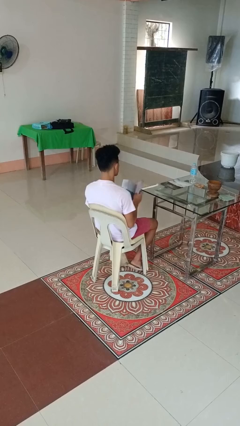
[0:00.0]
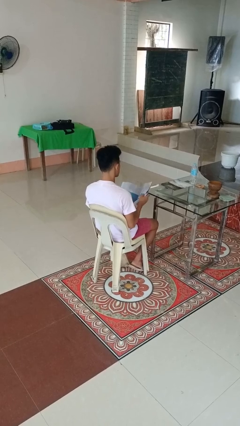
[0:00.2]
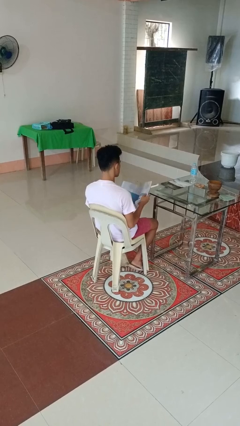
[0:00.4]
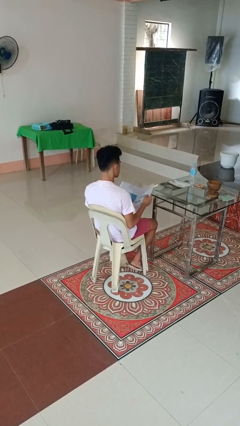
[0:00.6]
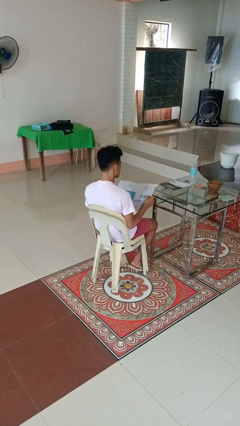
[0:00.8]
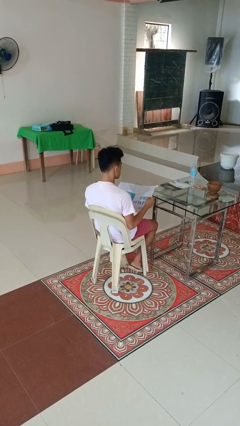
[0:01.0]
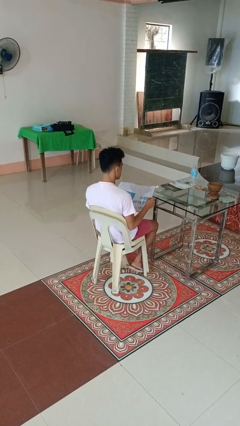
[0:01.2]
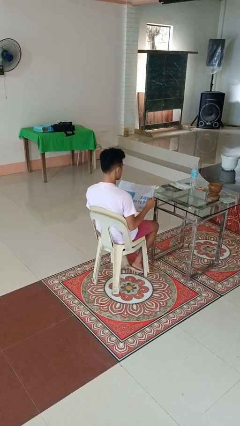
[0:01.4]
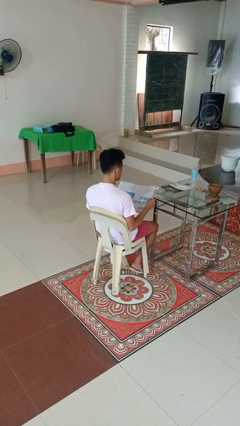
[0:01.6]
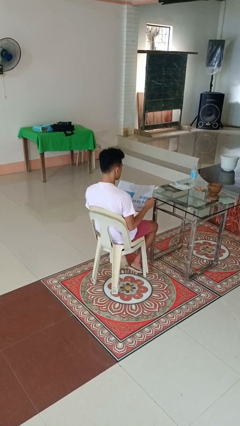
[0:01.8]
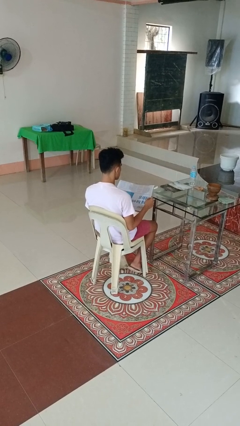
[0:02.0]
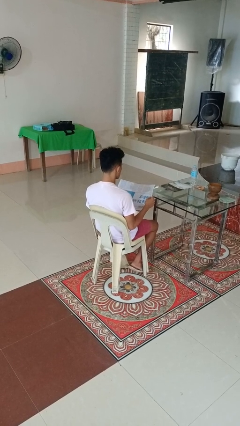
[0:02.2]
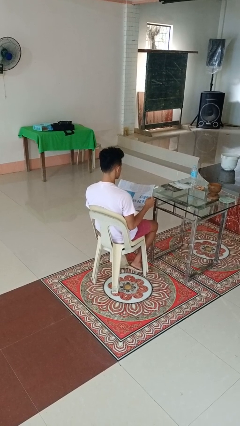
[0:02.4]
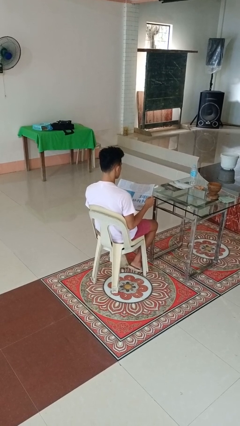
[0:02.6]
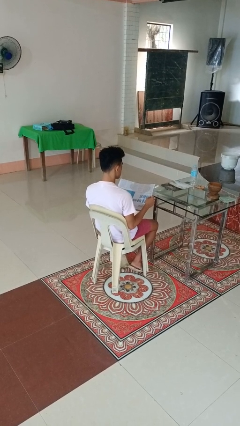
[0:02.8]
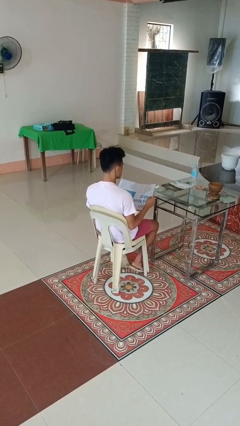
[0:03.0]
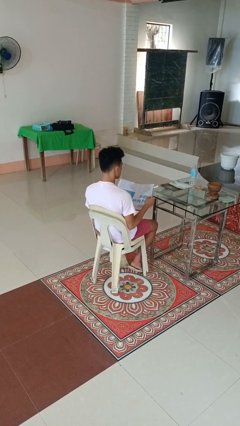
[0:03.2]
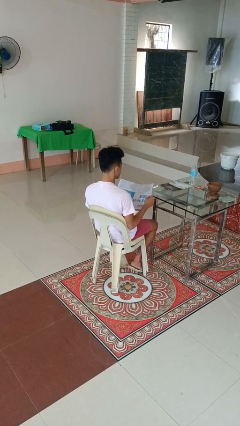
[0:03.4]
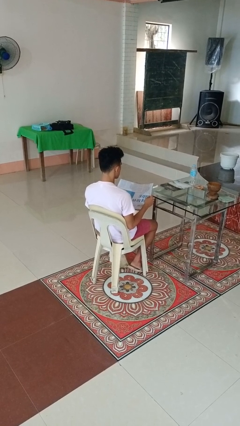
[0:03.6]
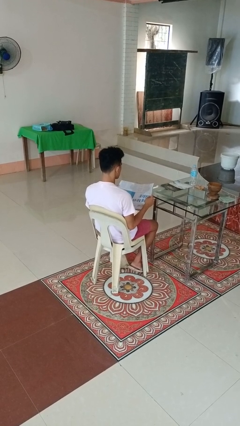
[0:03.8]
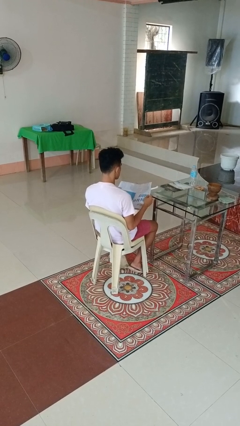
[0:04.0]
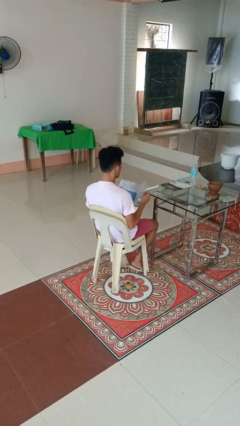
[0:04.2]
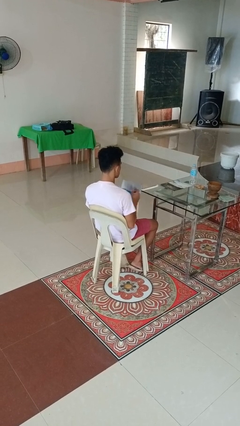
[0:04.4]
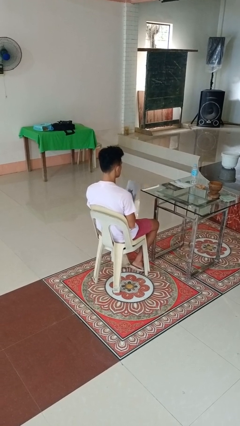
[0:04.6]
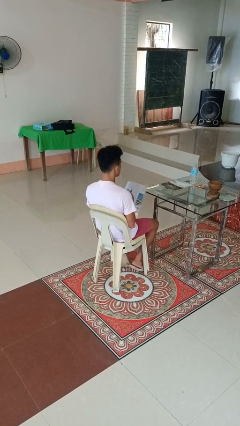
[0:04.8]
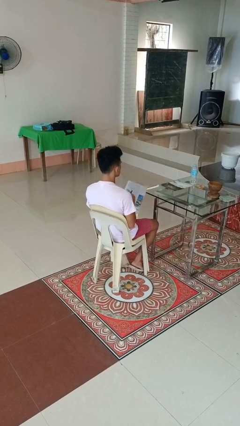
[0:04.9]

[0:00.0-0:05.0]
person reads newspaper

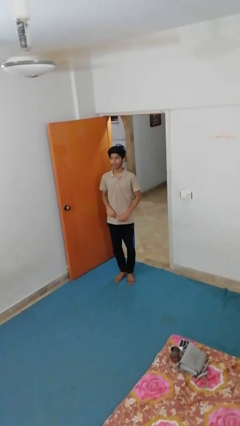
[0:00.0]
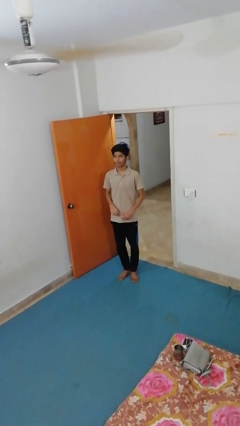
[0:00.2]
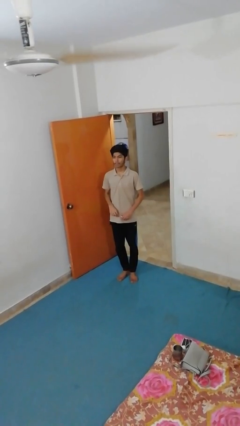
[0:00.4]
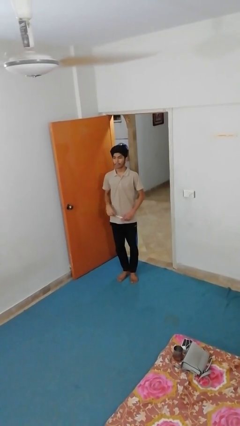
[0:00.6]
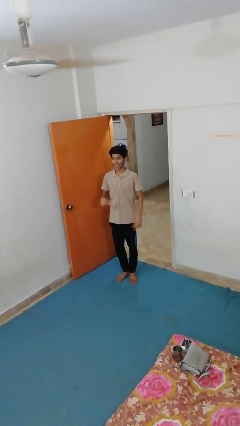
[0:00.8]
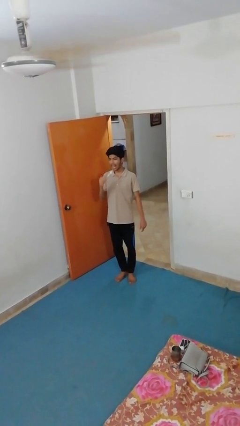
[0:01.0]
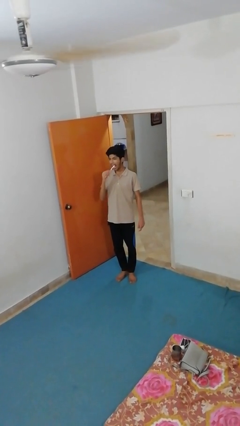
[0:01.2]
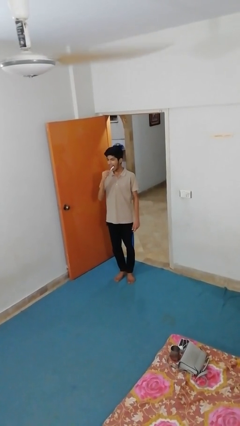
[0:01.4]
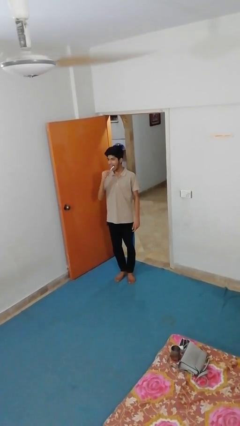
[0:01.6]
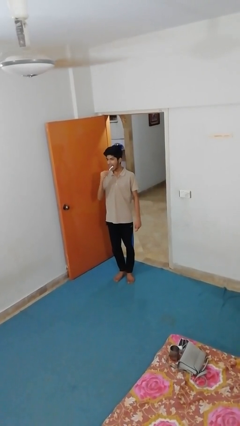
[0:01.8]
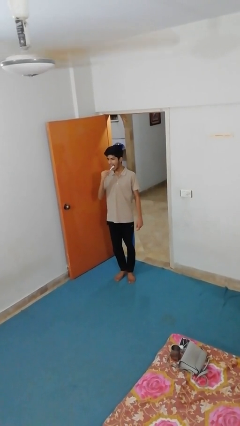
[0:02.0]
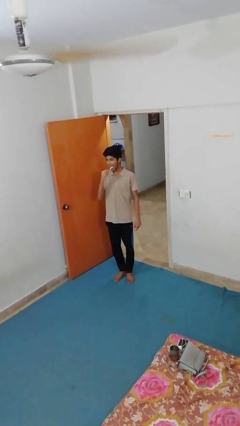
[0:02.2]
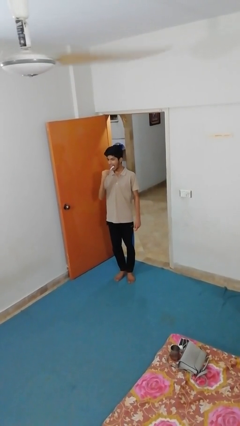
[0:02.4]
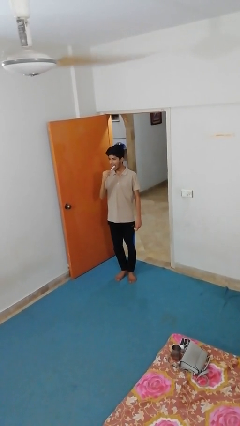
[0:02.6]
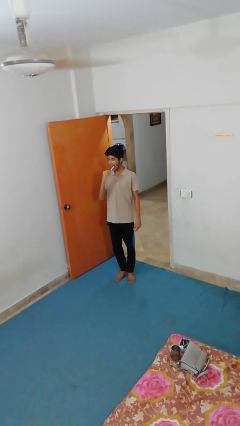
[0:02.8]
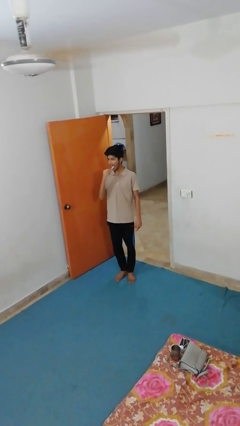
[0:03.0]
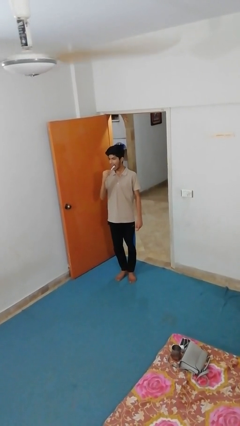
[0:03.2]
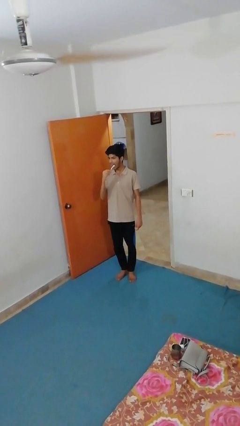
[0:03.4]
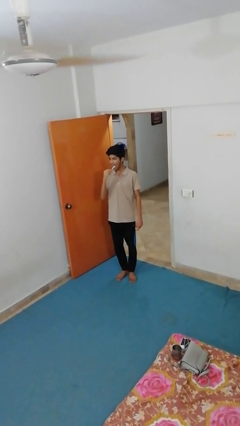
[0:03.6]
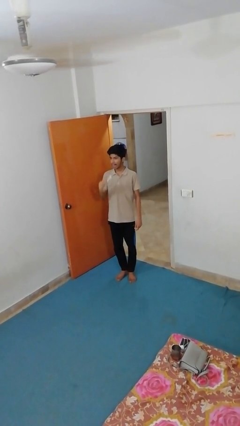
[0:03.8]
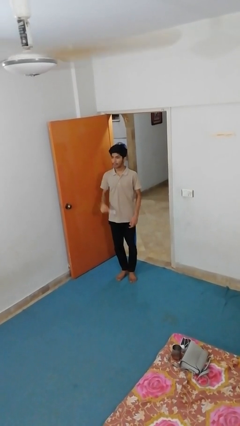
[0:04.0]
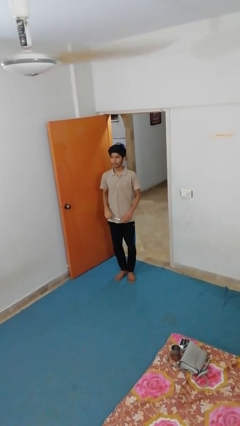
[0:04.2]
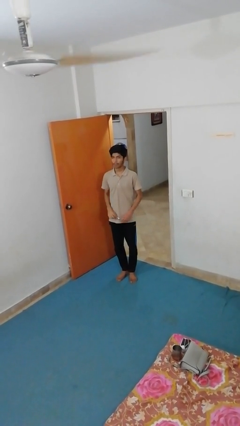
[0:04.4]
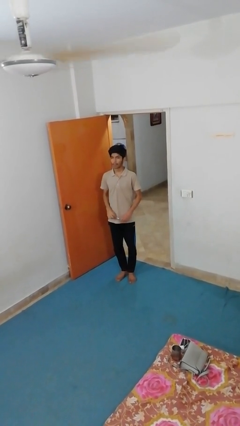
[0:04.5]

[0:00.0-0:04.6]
person brushes teeth

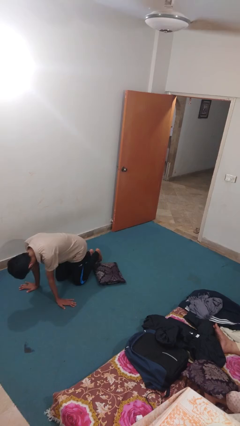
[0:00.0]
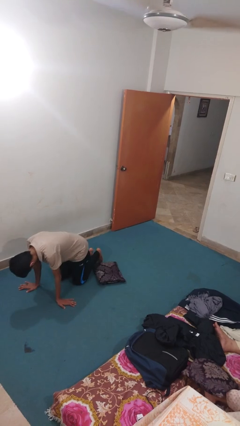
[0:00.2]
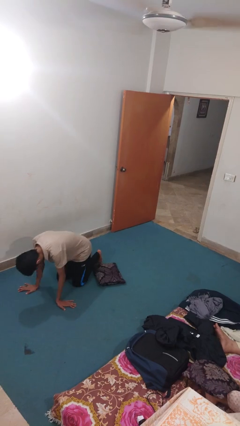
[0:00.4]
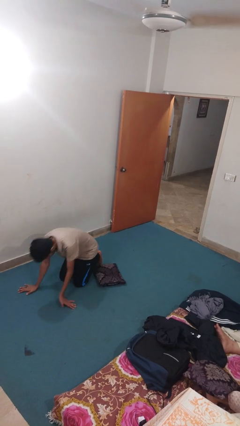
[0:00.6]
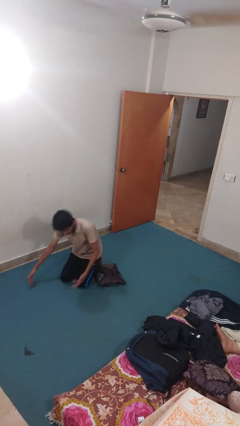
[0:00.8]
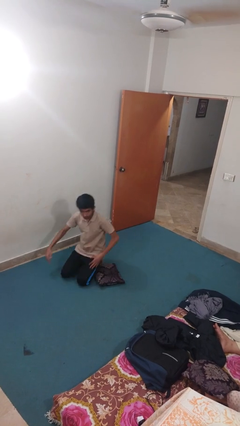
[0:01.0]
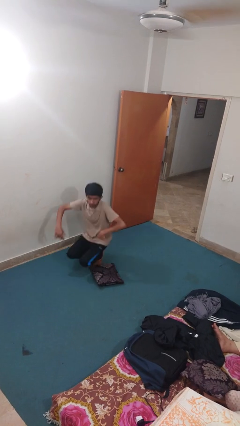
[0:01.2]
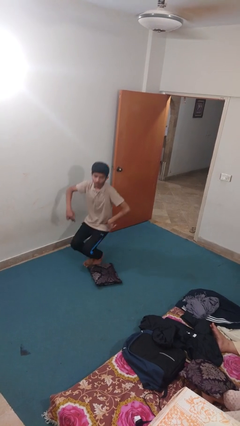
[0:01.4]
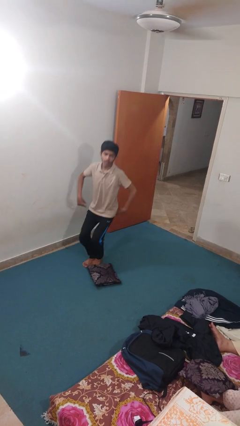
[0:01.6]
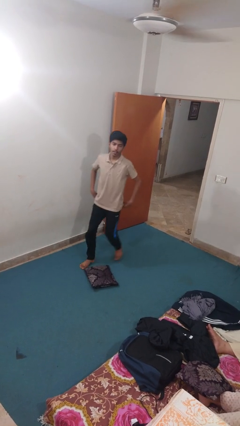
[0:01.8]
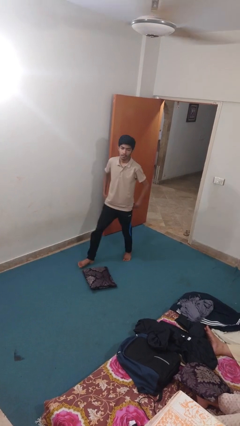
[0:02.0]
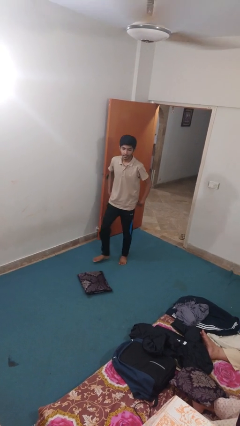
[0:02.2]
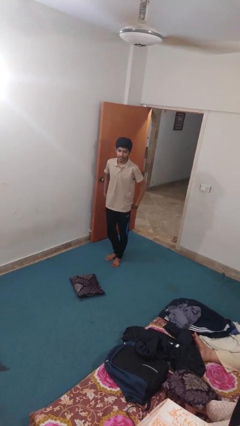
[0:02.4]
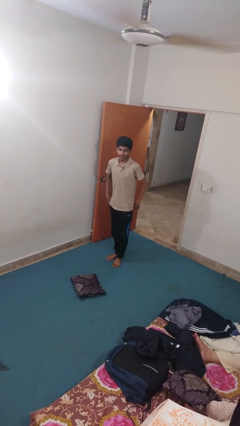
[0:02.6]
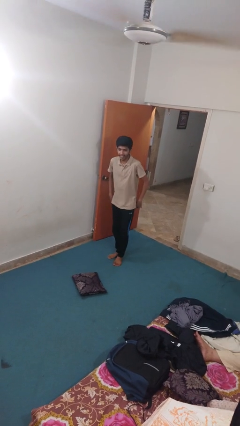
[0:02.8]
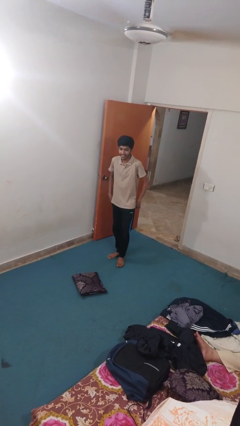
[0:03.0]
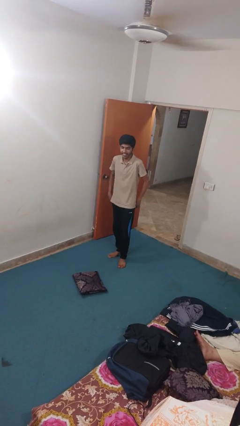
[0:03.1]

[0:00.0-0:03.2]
person stands up from floor

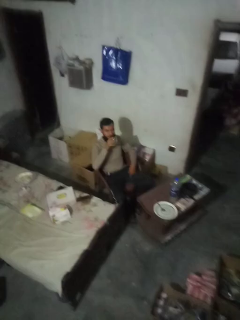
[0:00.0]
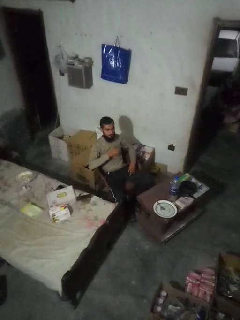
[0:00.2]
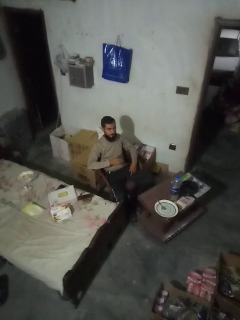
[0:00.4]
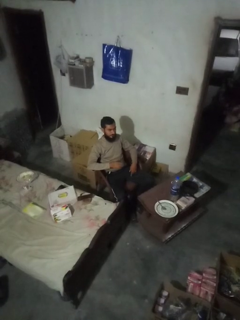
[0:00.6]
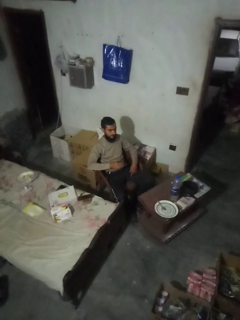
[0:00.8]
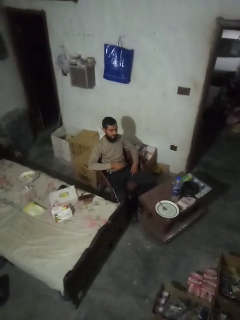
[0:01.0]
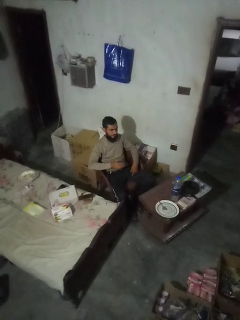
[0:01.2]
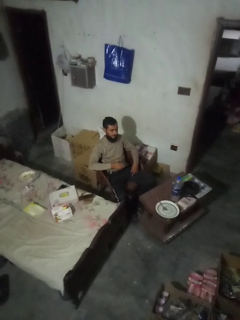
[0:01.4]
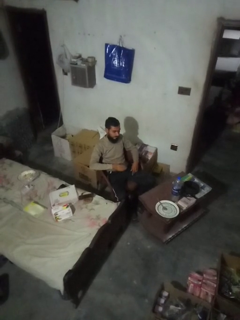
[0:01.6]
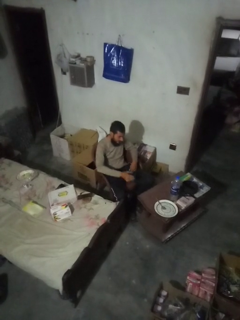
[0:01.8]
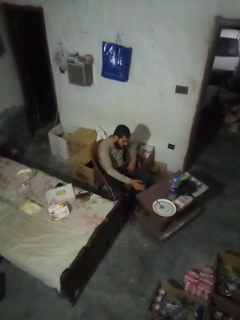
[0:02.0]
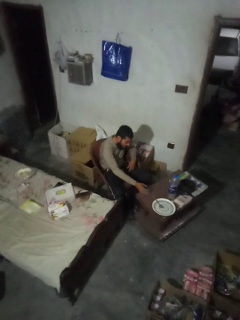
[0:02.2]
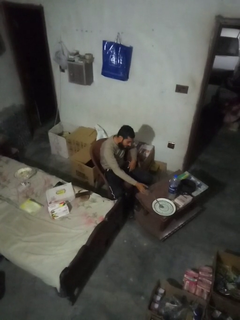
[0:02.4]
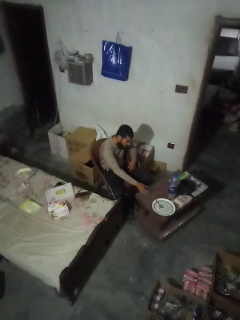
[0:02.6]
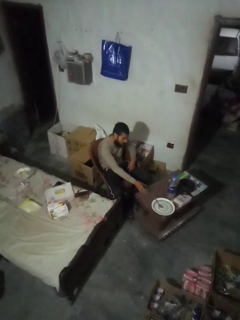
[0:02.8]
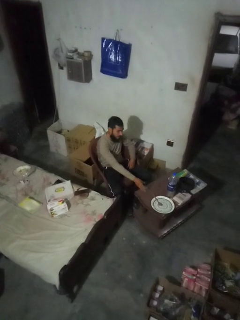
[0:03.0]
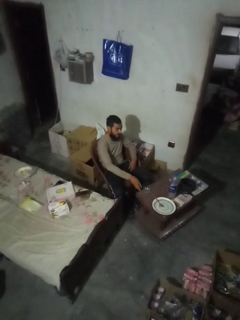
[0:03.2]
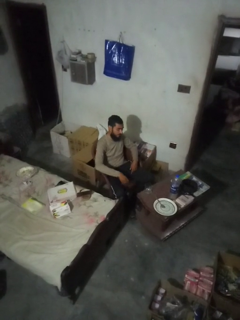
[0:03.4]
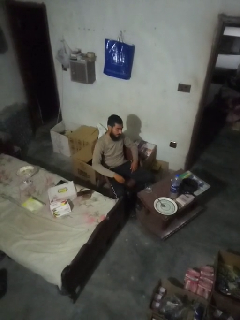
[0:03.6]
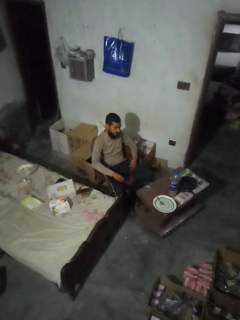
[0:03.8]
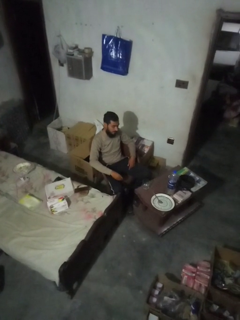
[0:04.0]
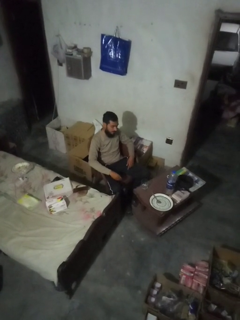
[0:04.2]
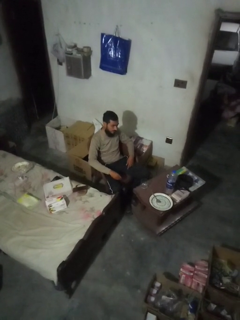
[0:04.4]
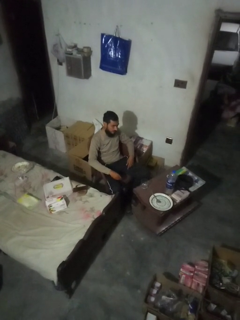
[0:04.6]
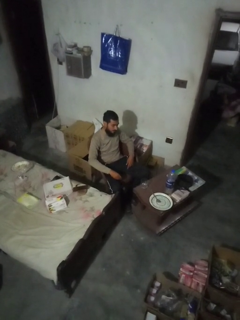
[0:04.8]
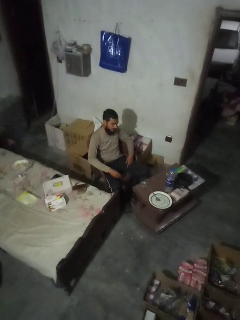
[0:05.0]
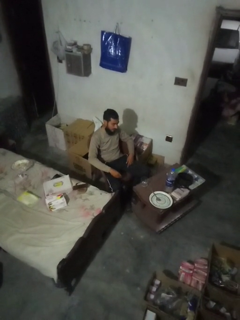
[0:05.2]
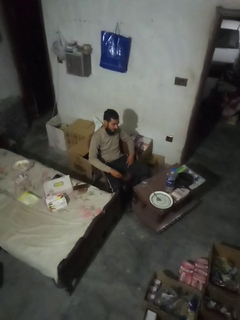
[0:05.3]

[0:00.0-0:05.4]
person puts down object on table

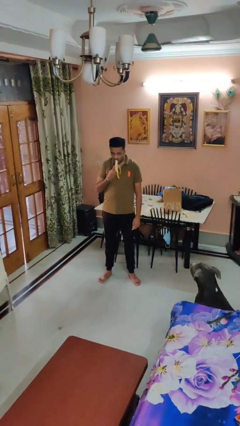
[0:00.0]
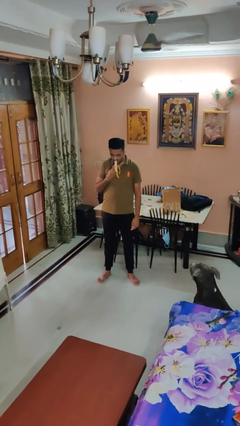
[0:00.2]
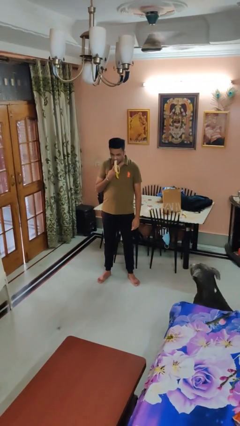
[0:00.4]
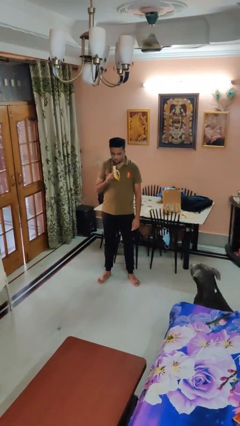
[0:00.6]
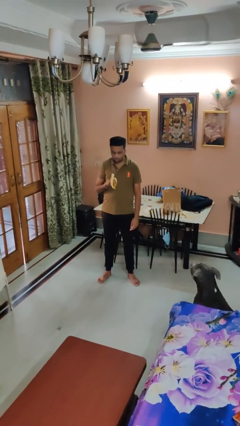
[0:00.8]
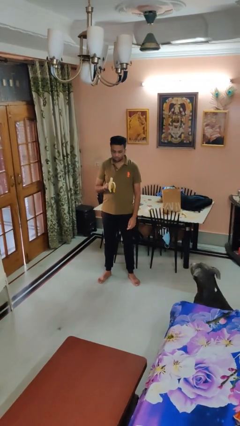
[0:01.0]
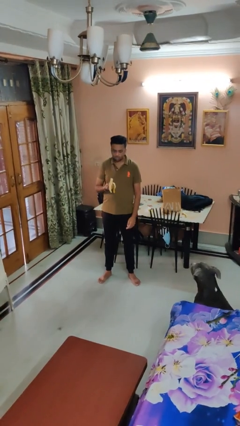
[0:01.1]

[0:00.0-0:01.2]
person eats banana
